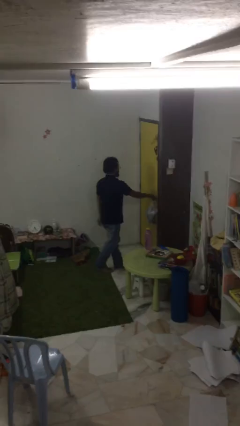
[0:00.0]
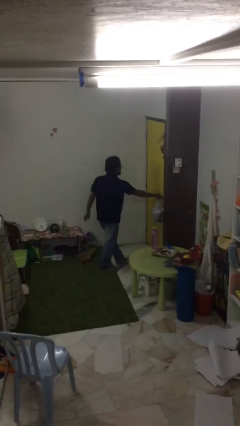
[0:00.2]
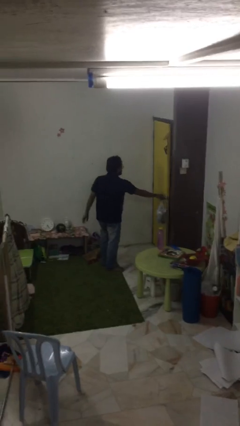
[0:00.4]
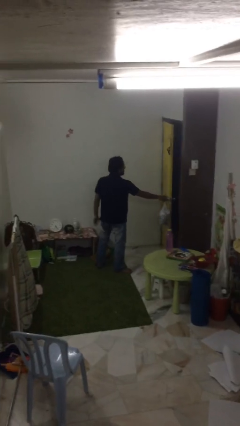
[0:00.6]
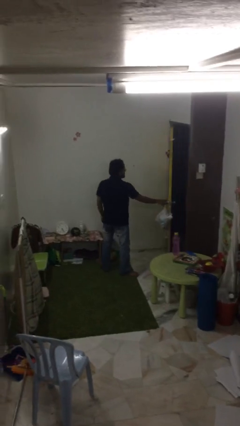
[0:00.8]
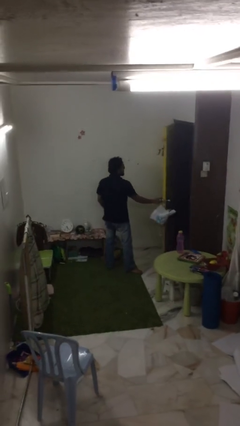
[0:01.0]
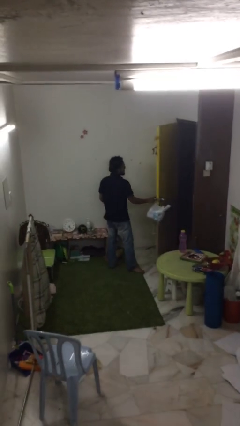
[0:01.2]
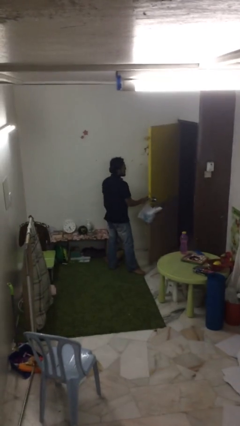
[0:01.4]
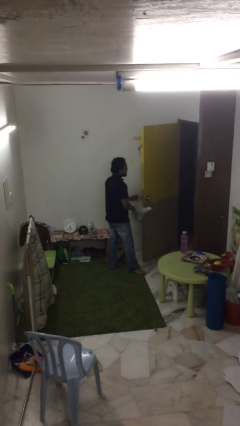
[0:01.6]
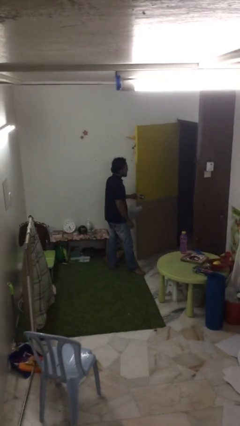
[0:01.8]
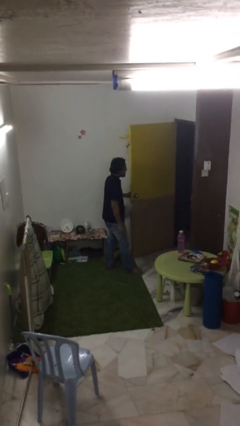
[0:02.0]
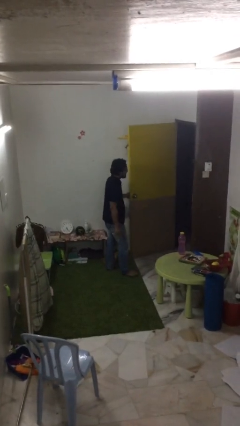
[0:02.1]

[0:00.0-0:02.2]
person opens facility door

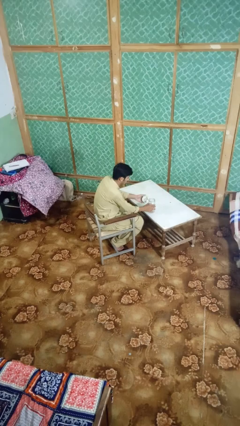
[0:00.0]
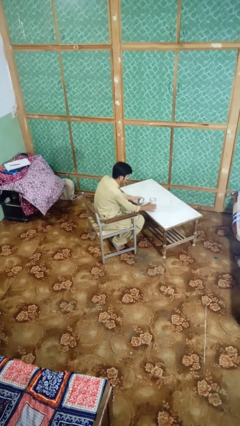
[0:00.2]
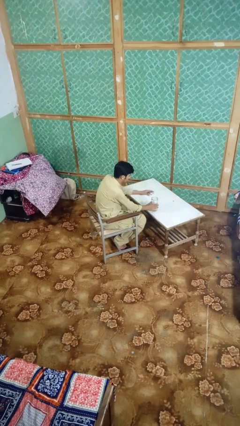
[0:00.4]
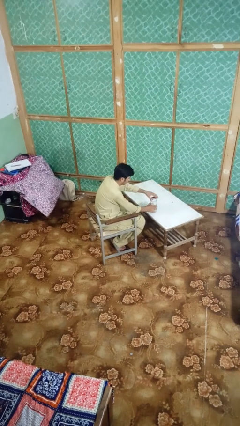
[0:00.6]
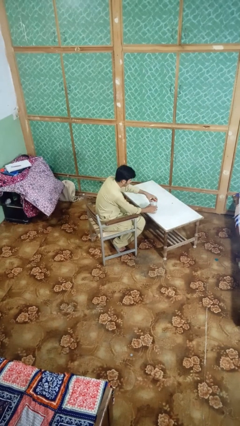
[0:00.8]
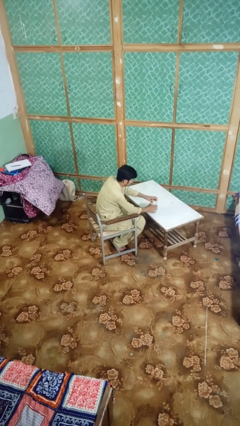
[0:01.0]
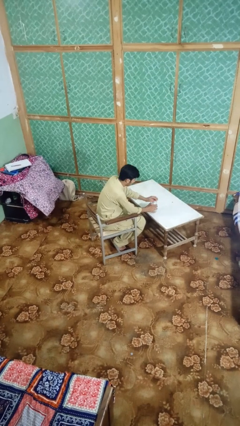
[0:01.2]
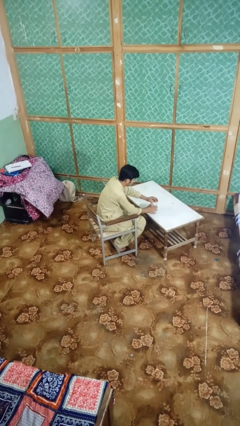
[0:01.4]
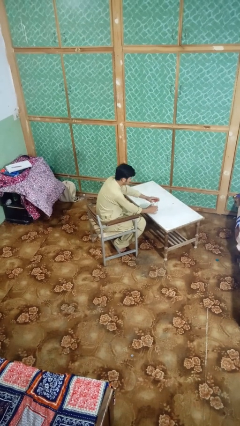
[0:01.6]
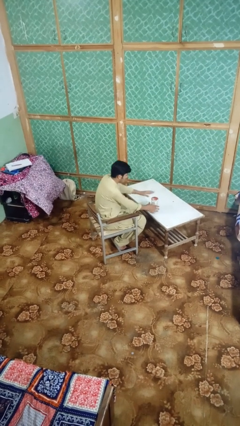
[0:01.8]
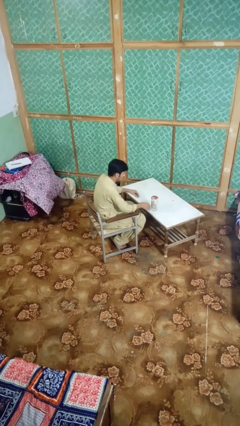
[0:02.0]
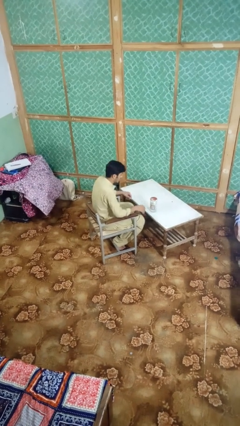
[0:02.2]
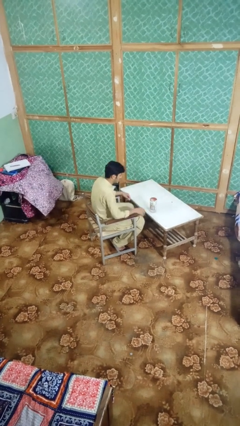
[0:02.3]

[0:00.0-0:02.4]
person closes jar

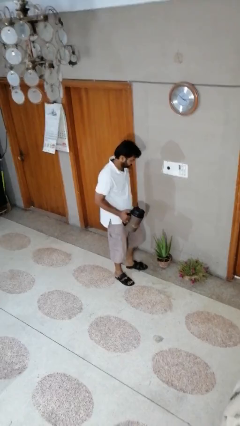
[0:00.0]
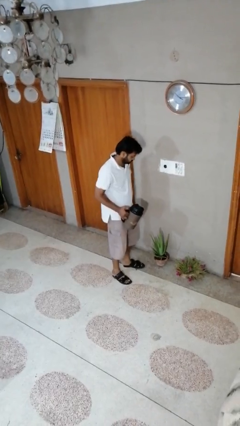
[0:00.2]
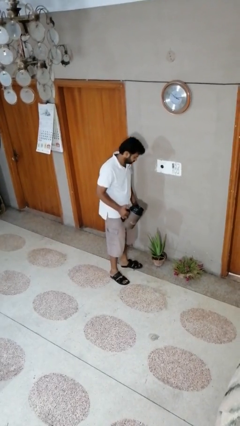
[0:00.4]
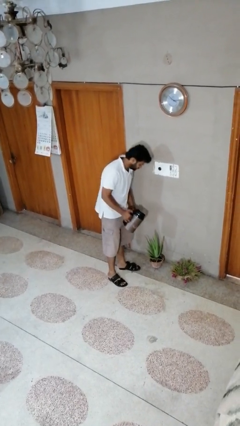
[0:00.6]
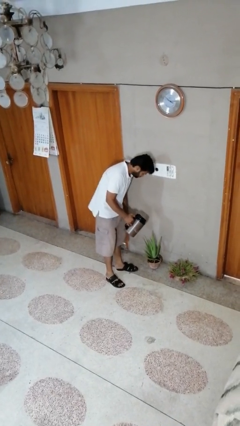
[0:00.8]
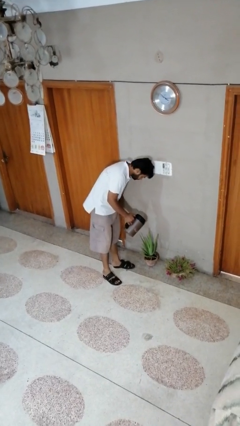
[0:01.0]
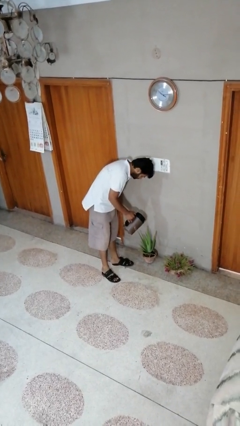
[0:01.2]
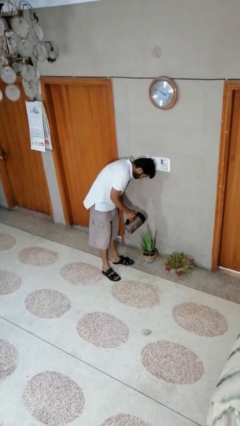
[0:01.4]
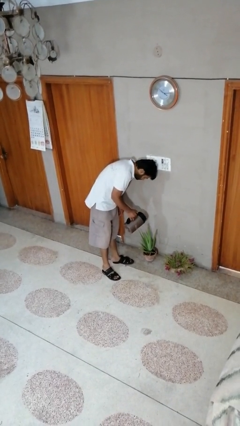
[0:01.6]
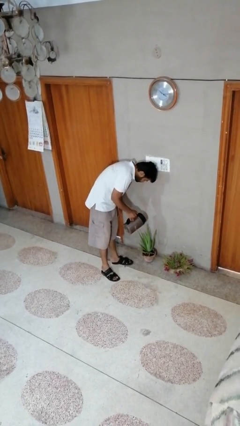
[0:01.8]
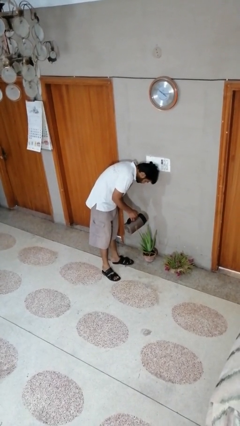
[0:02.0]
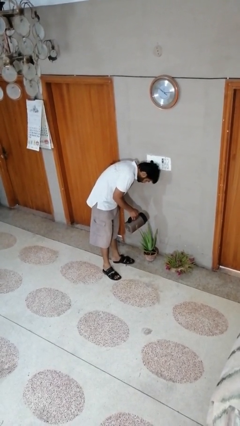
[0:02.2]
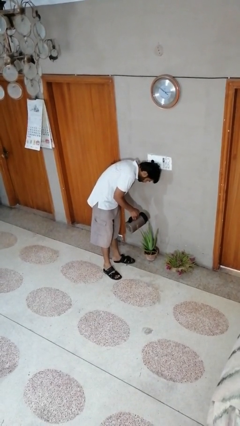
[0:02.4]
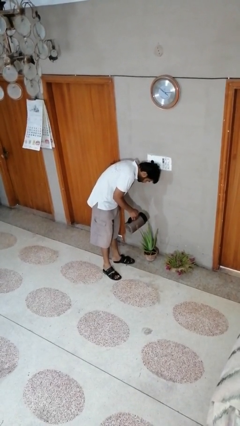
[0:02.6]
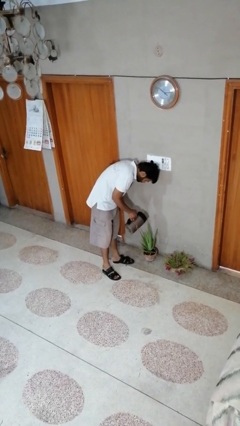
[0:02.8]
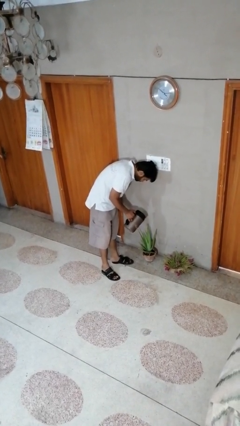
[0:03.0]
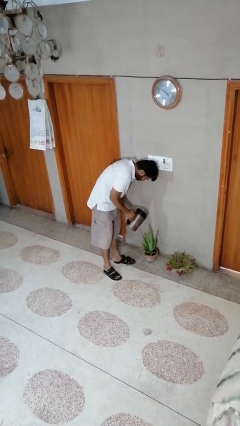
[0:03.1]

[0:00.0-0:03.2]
person waters houseplant

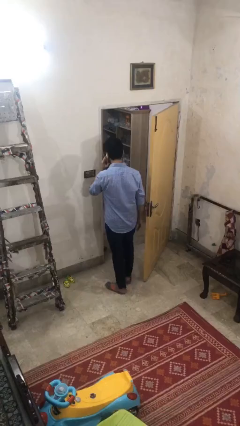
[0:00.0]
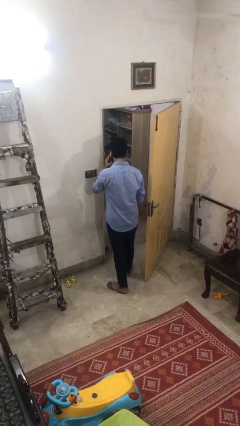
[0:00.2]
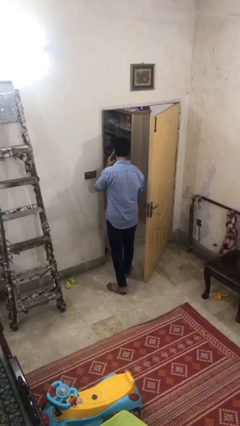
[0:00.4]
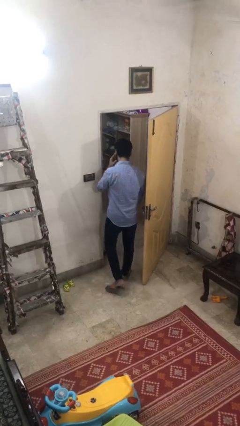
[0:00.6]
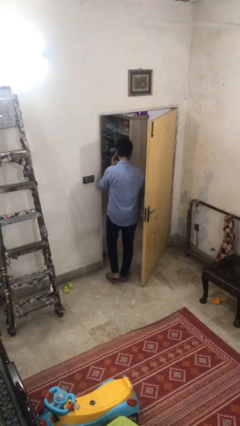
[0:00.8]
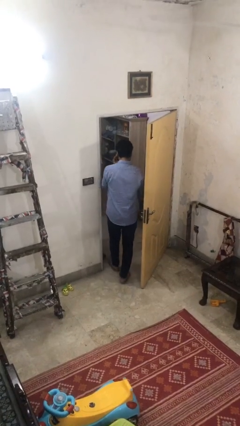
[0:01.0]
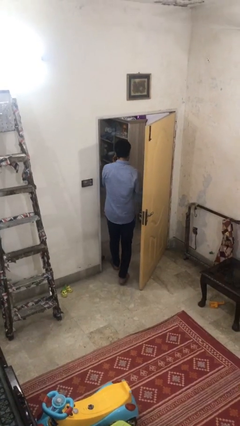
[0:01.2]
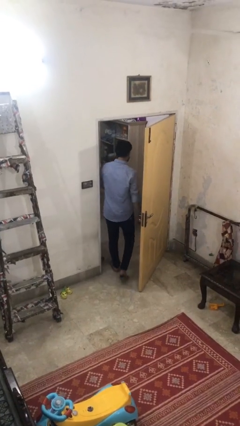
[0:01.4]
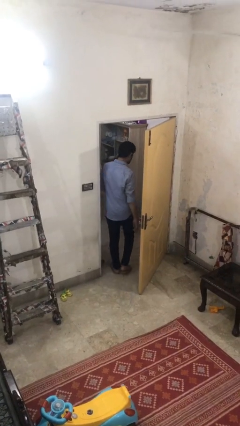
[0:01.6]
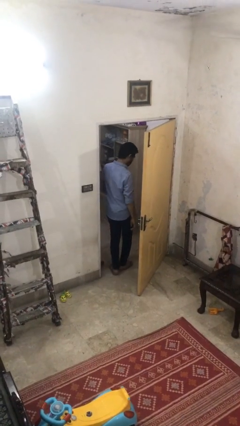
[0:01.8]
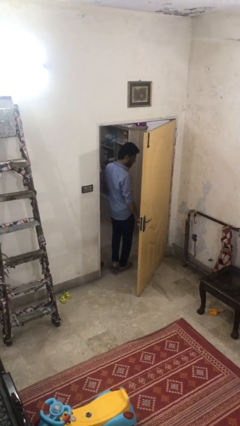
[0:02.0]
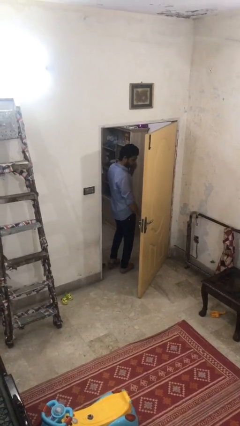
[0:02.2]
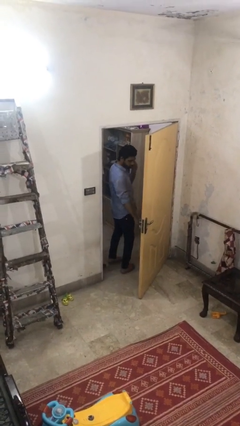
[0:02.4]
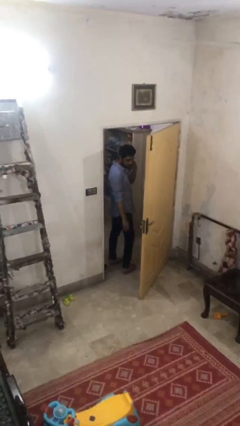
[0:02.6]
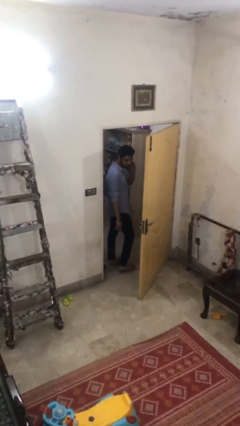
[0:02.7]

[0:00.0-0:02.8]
person exits scene through structure

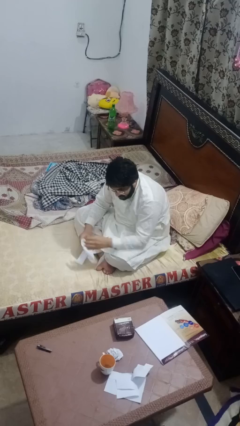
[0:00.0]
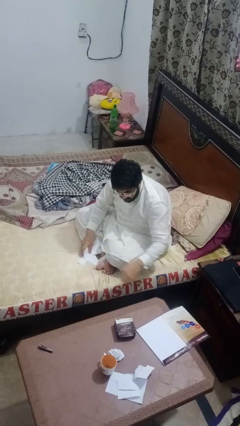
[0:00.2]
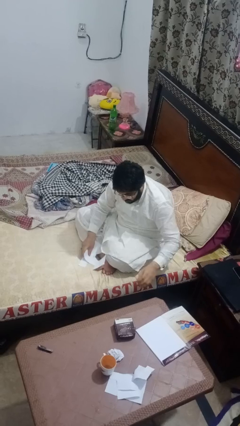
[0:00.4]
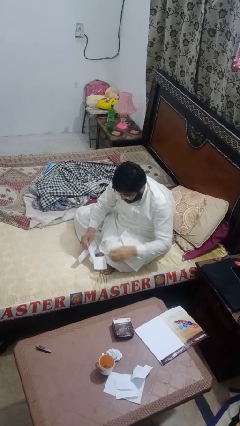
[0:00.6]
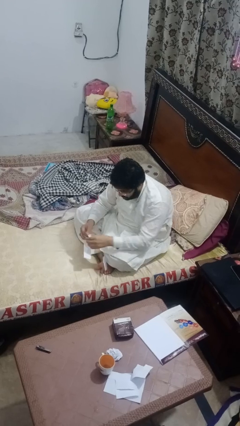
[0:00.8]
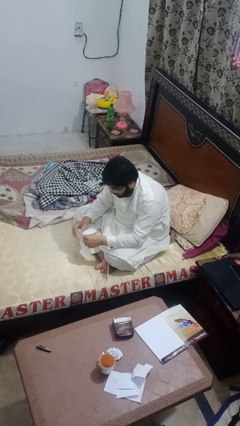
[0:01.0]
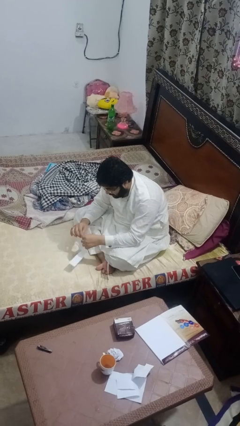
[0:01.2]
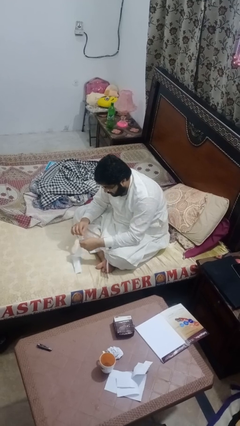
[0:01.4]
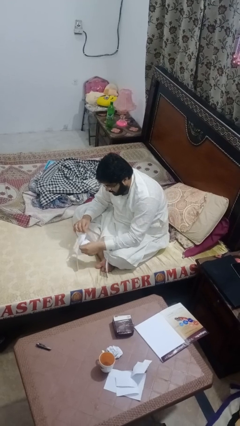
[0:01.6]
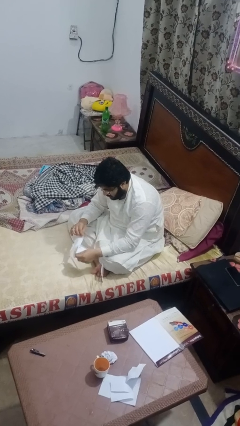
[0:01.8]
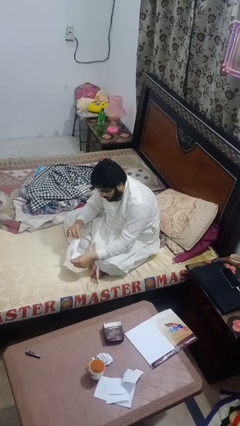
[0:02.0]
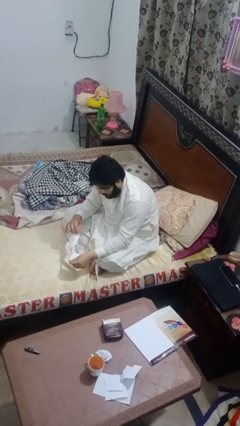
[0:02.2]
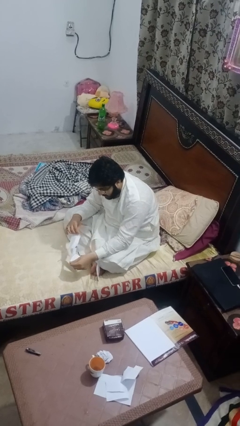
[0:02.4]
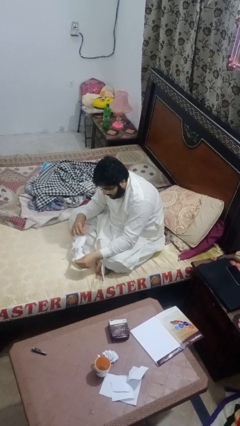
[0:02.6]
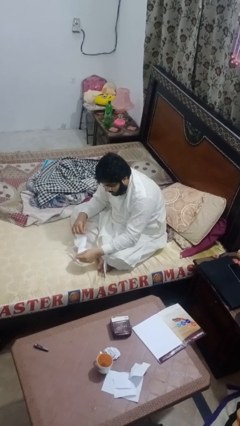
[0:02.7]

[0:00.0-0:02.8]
person tears paper

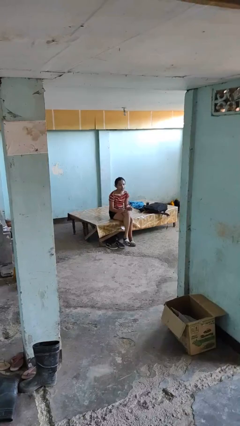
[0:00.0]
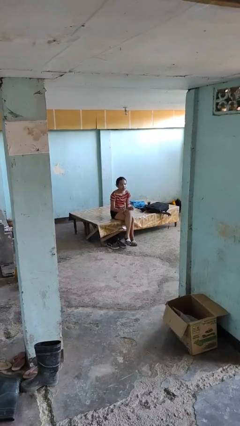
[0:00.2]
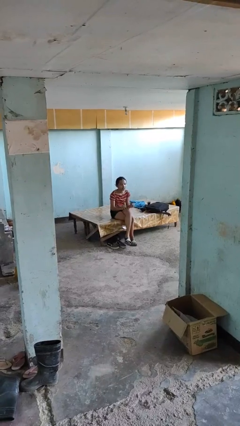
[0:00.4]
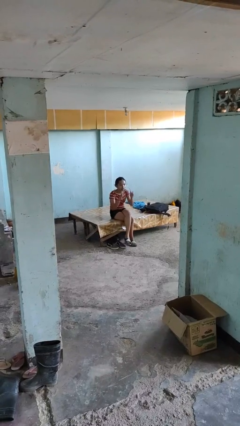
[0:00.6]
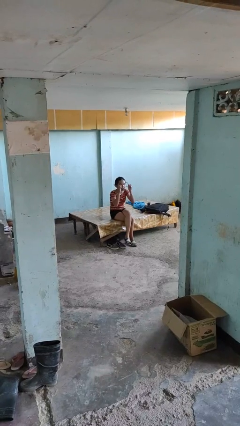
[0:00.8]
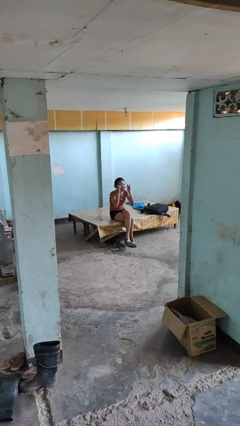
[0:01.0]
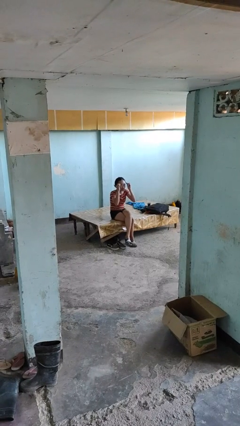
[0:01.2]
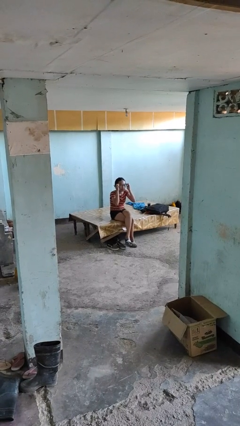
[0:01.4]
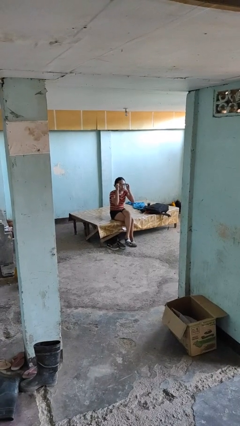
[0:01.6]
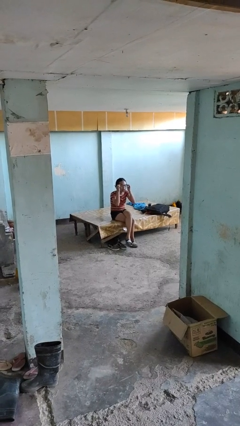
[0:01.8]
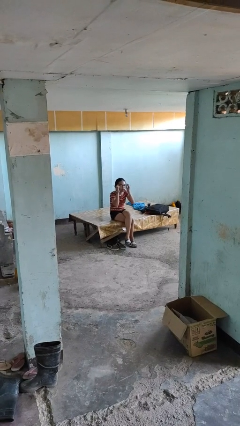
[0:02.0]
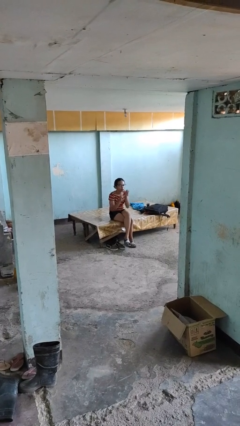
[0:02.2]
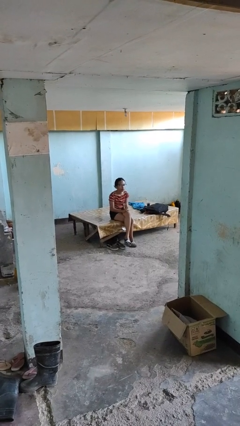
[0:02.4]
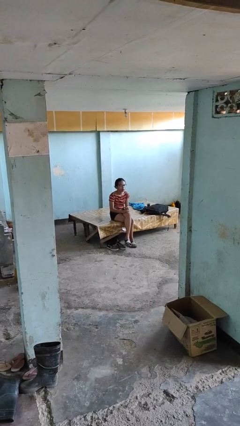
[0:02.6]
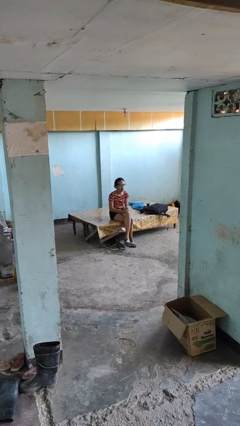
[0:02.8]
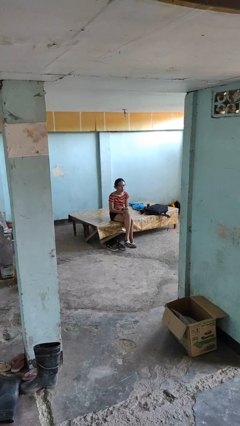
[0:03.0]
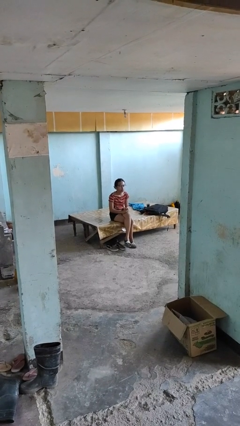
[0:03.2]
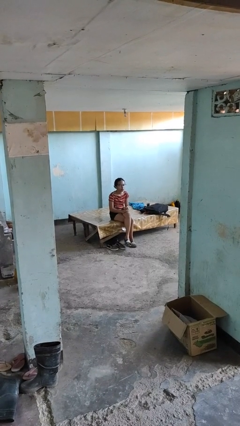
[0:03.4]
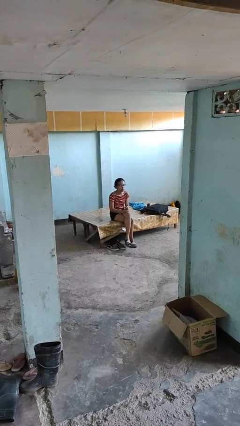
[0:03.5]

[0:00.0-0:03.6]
person puts on glasses

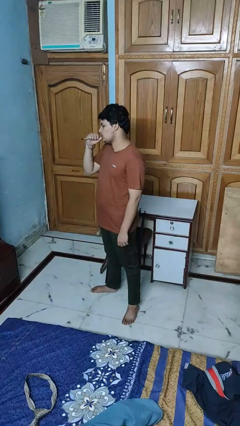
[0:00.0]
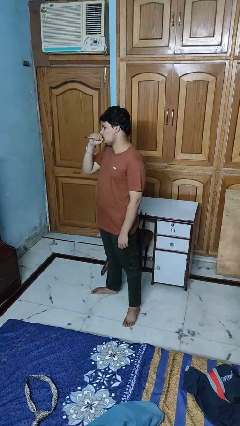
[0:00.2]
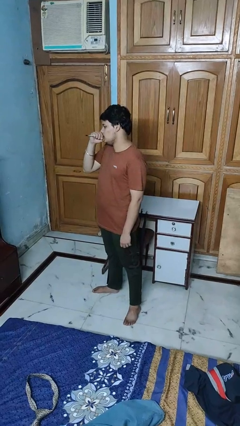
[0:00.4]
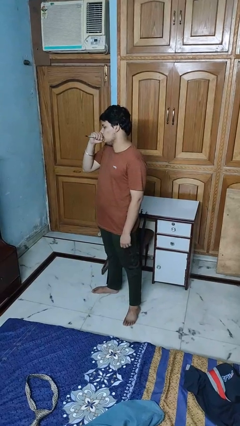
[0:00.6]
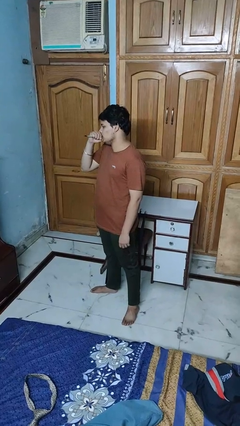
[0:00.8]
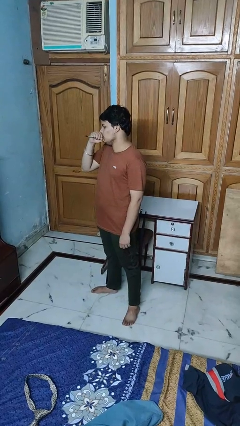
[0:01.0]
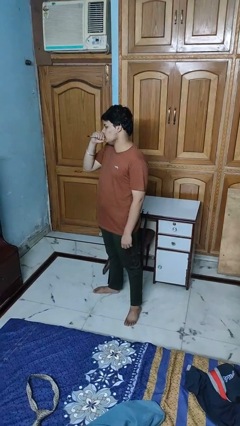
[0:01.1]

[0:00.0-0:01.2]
person vapes
